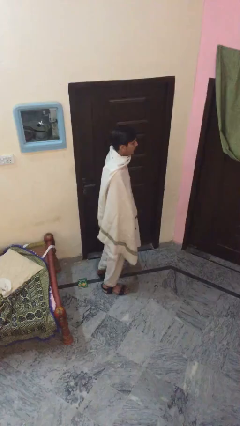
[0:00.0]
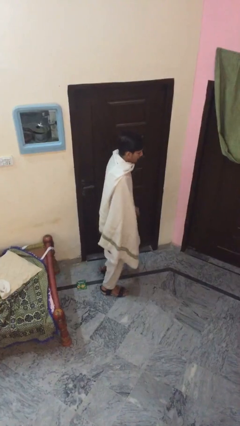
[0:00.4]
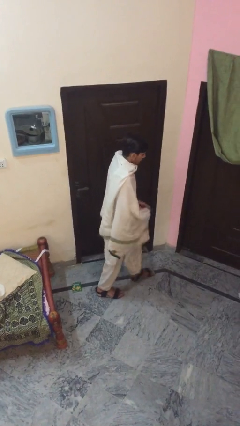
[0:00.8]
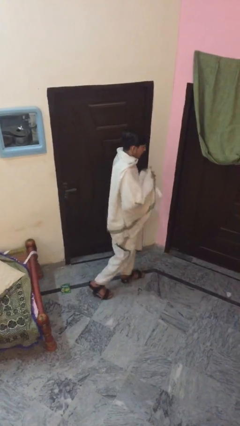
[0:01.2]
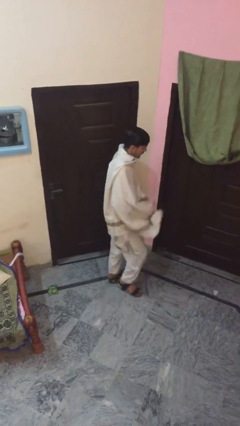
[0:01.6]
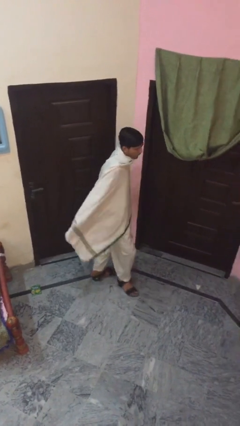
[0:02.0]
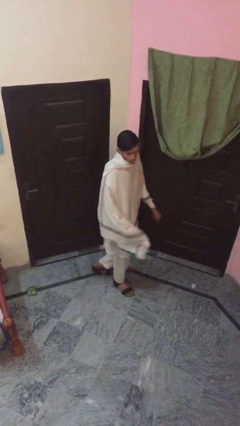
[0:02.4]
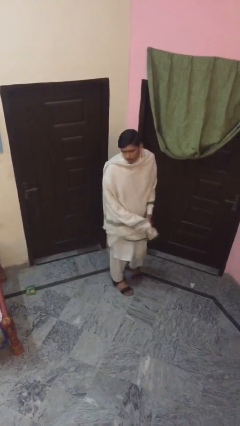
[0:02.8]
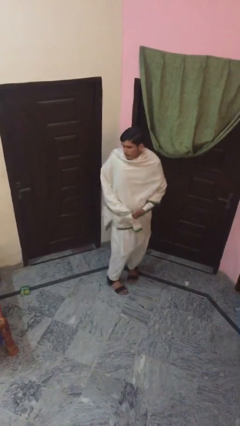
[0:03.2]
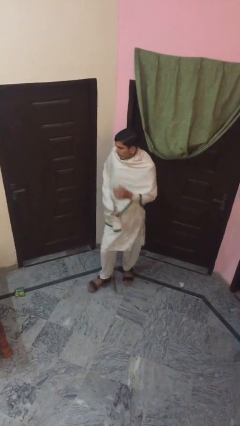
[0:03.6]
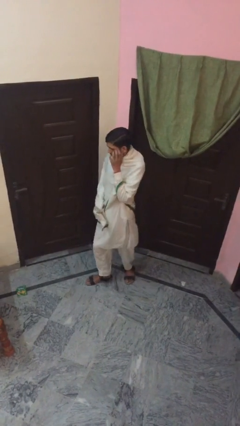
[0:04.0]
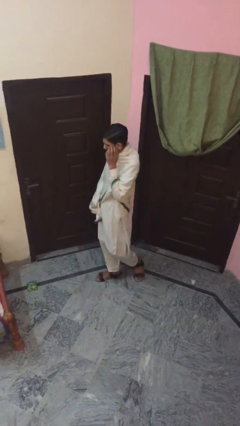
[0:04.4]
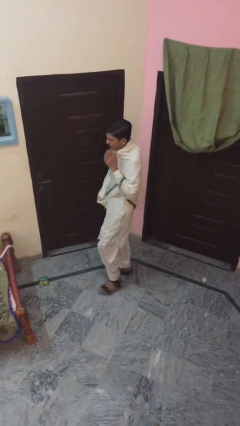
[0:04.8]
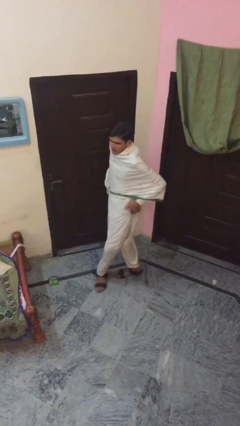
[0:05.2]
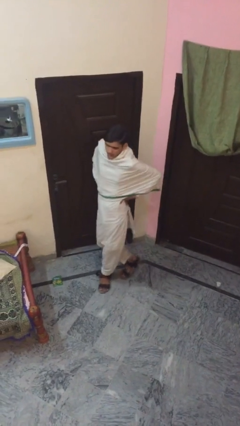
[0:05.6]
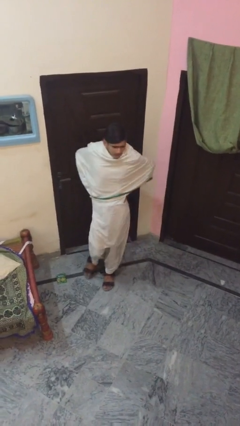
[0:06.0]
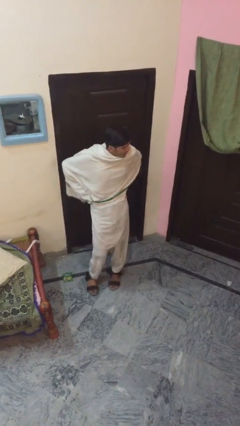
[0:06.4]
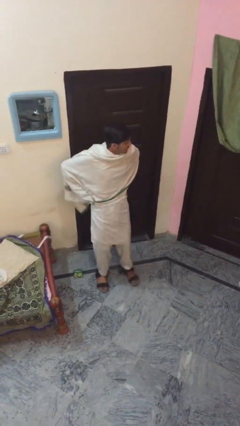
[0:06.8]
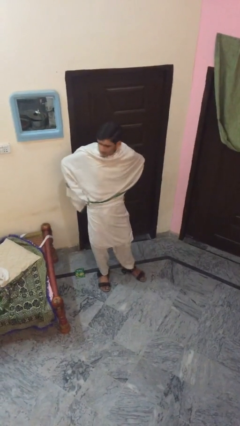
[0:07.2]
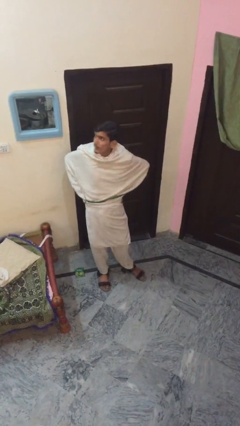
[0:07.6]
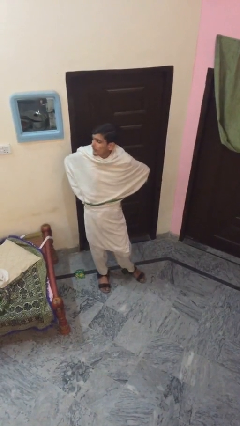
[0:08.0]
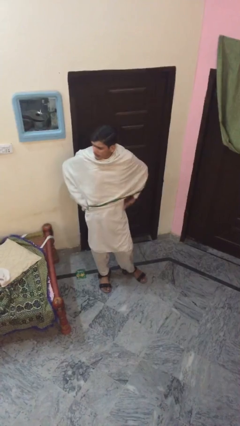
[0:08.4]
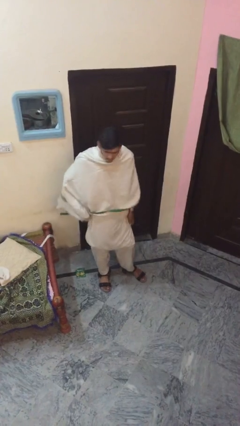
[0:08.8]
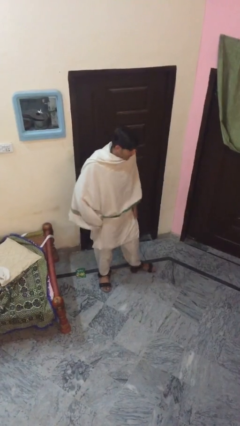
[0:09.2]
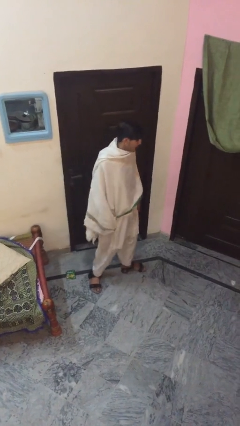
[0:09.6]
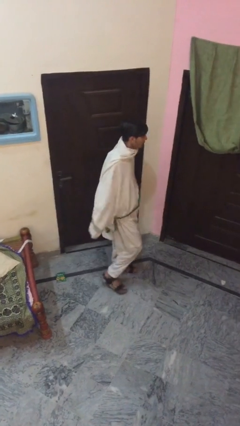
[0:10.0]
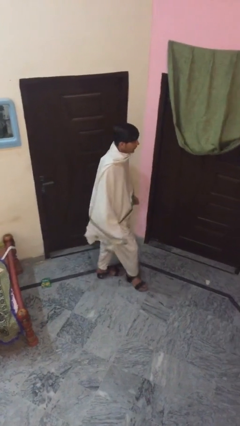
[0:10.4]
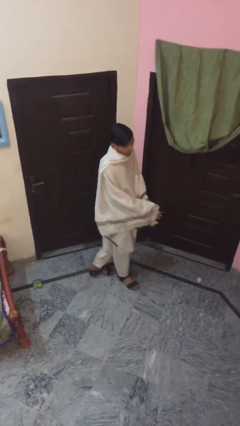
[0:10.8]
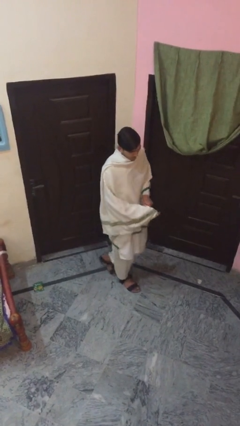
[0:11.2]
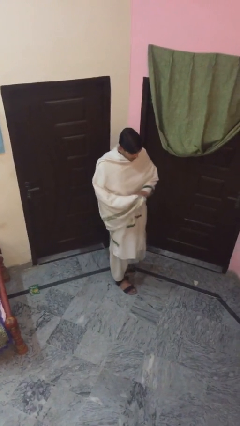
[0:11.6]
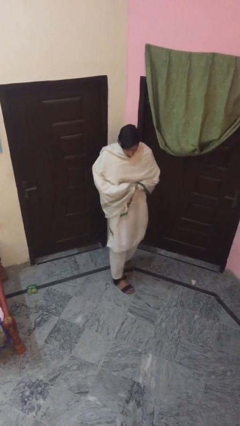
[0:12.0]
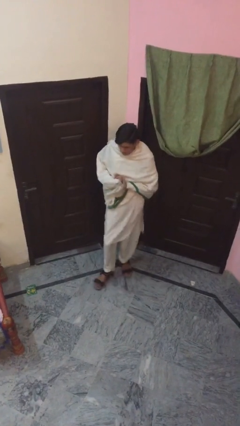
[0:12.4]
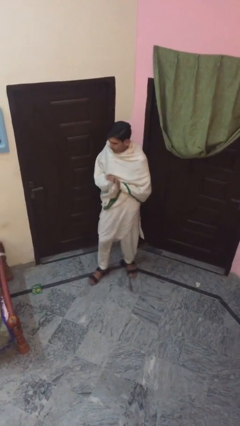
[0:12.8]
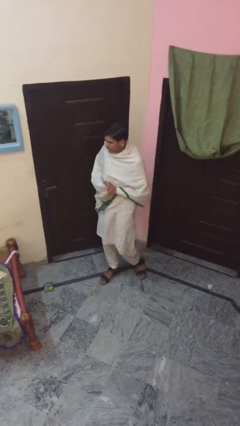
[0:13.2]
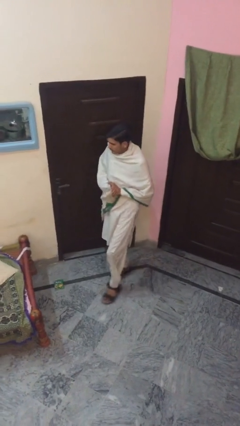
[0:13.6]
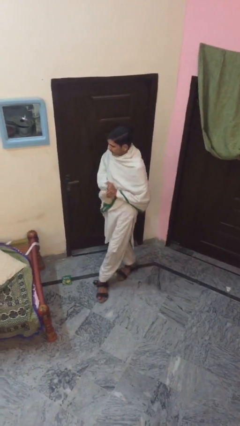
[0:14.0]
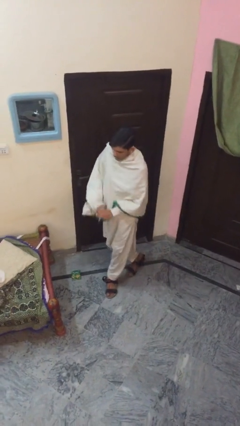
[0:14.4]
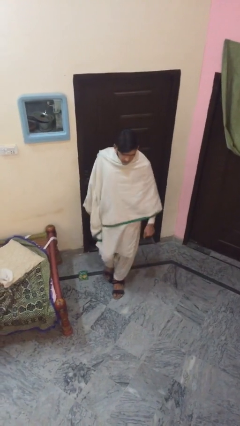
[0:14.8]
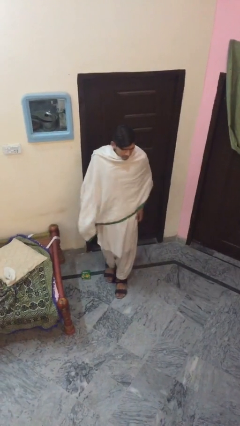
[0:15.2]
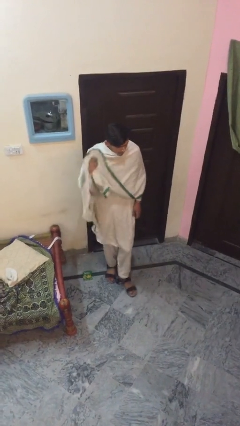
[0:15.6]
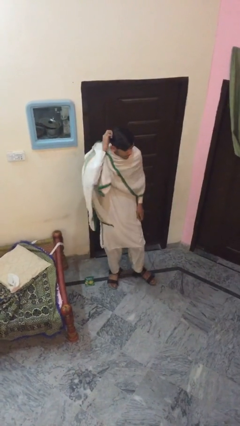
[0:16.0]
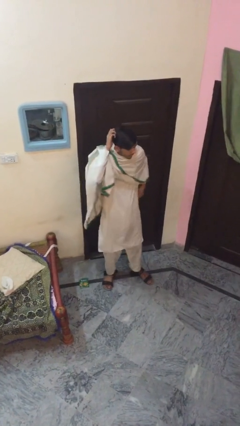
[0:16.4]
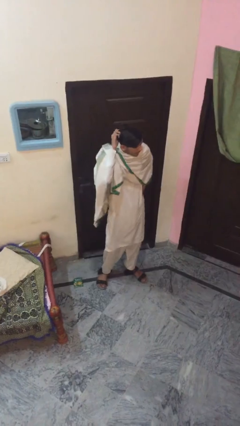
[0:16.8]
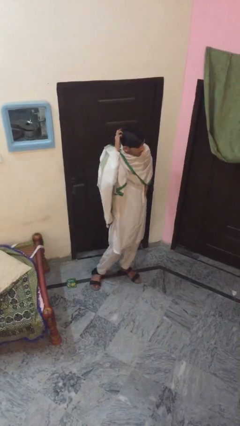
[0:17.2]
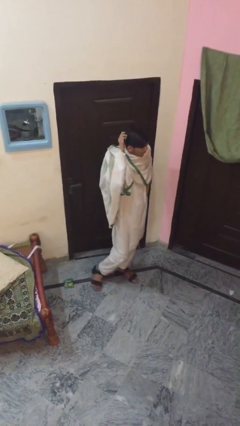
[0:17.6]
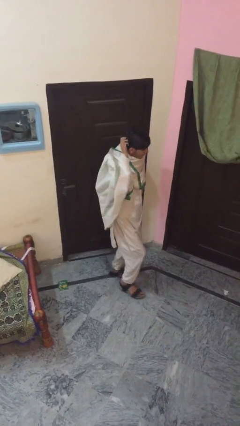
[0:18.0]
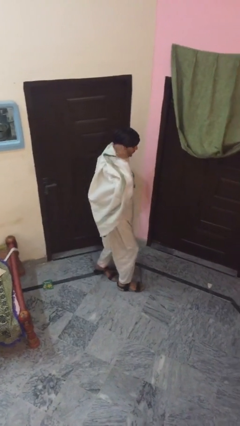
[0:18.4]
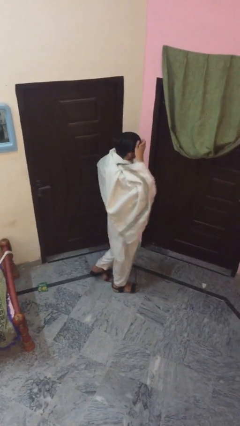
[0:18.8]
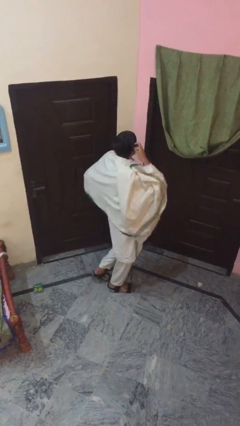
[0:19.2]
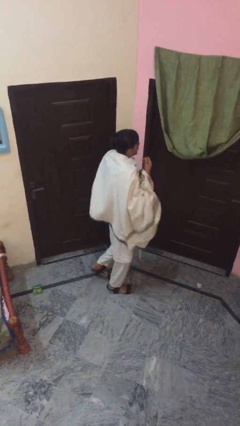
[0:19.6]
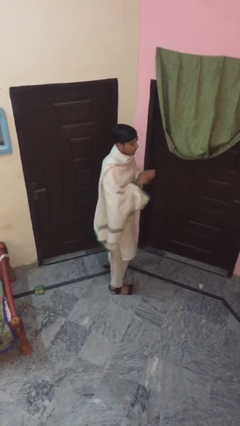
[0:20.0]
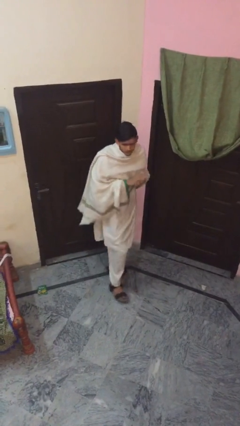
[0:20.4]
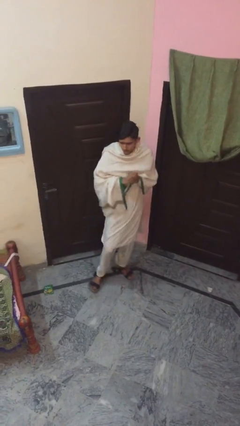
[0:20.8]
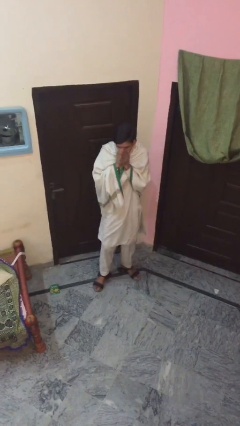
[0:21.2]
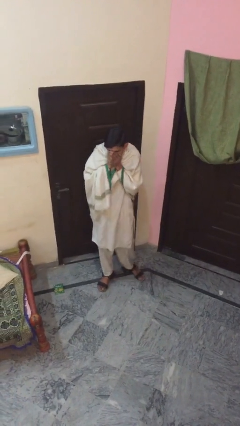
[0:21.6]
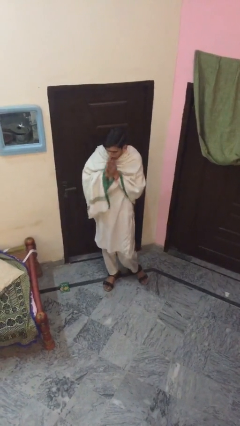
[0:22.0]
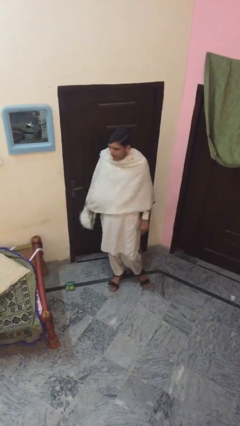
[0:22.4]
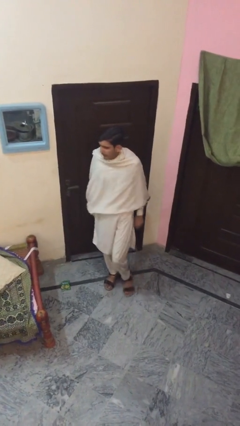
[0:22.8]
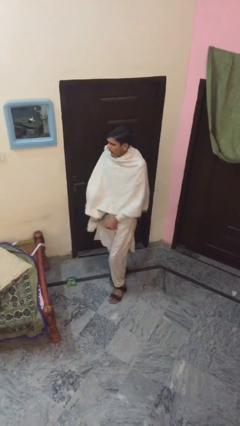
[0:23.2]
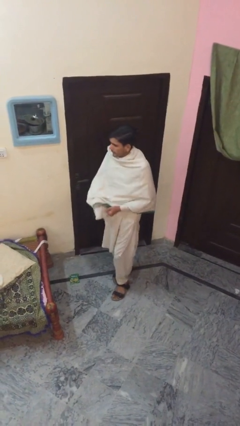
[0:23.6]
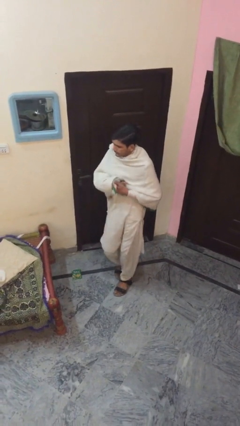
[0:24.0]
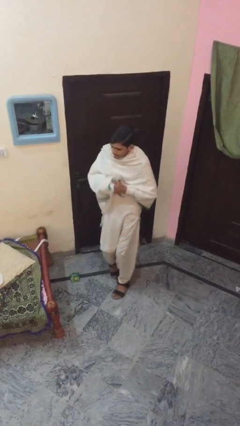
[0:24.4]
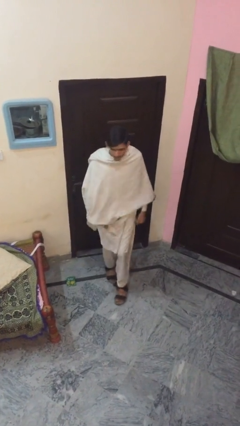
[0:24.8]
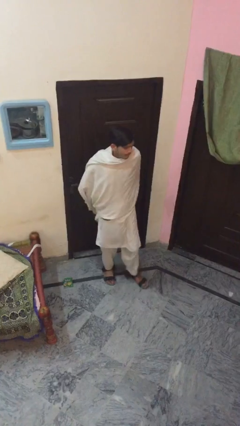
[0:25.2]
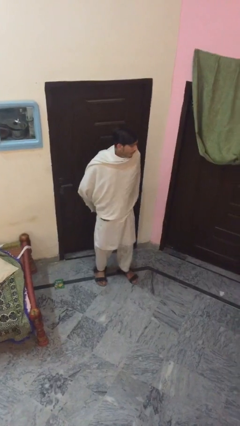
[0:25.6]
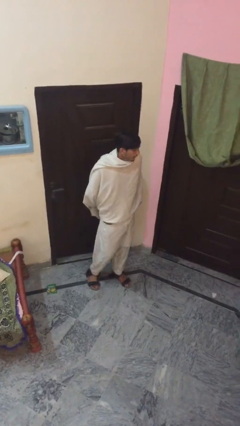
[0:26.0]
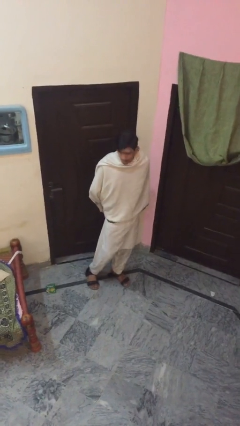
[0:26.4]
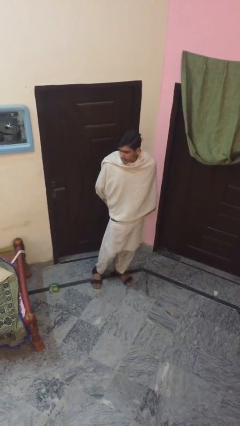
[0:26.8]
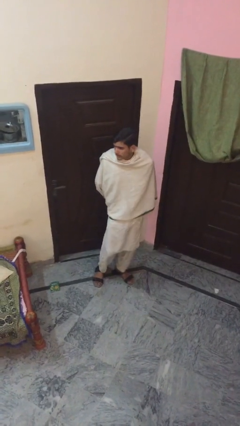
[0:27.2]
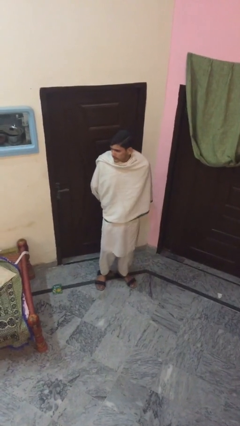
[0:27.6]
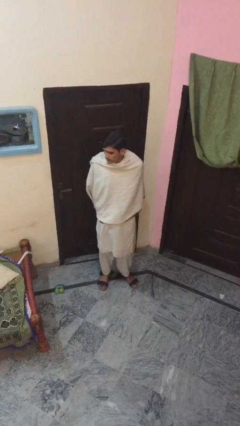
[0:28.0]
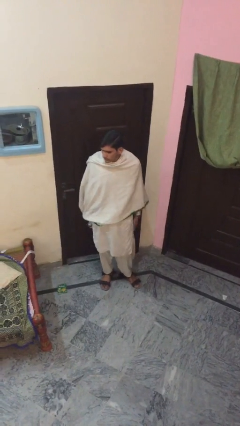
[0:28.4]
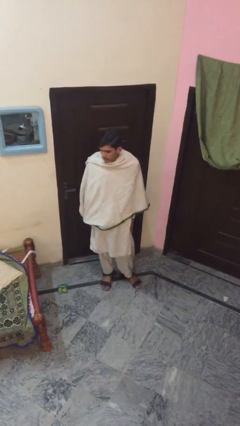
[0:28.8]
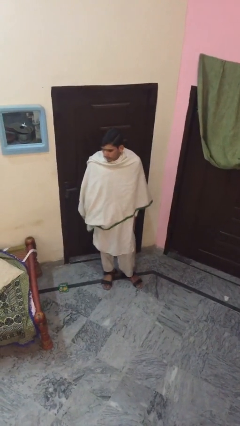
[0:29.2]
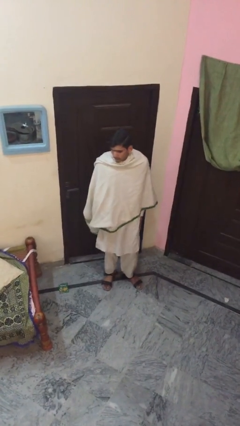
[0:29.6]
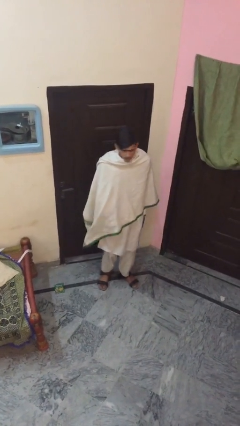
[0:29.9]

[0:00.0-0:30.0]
person walks

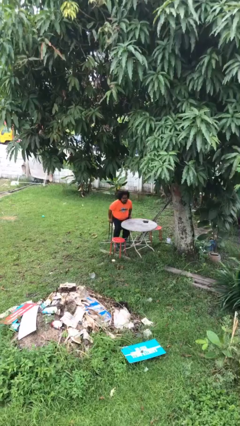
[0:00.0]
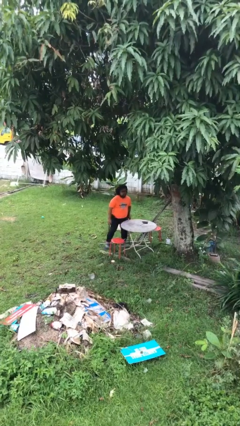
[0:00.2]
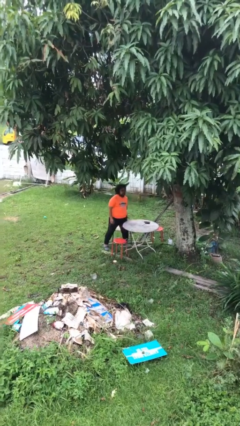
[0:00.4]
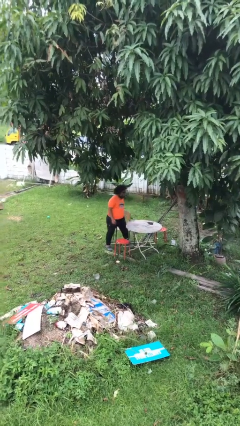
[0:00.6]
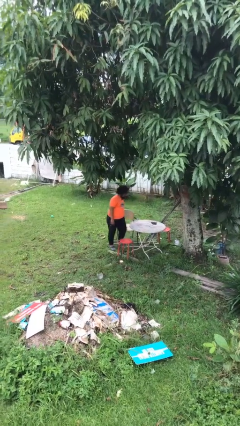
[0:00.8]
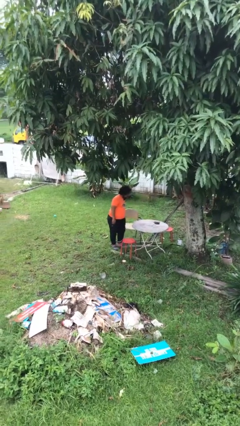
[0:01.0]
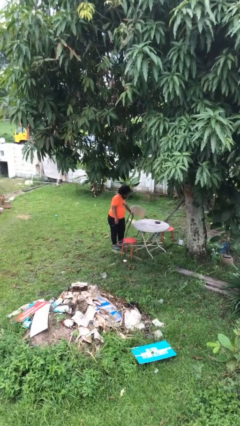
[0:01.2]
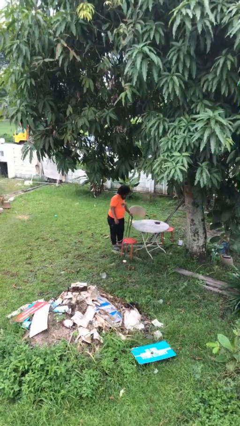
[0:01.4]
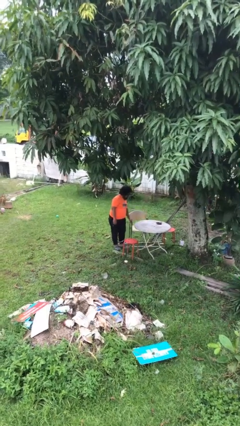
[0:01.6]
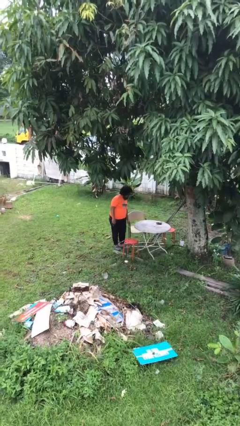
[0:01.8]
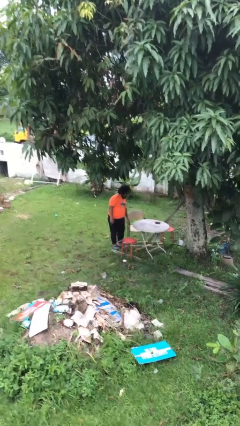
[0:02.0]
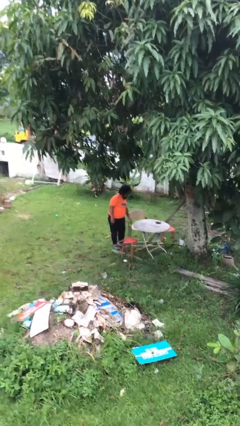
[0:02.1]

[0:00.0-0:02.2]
person stands up

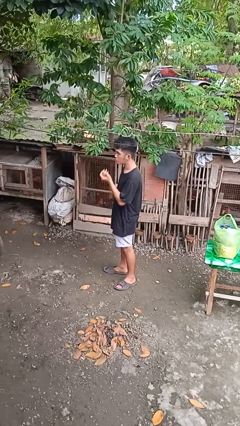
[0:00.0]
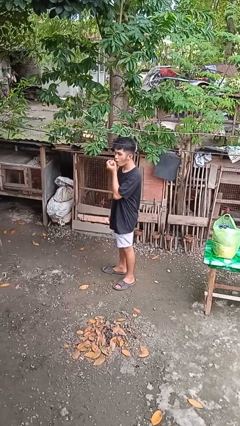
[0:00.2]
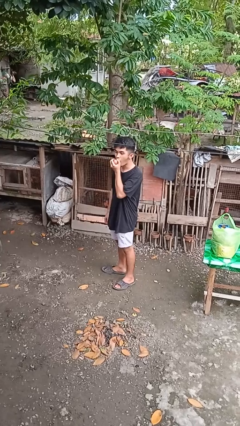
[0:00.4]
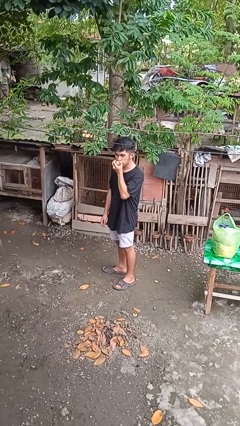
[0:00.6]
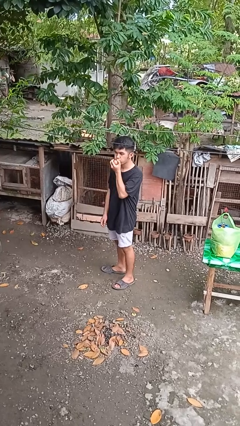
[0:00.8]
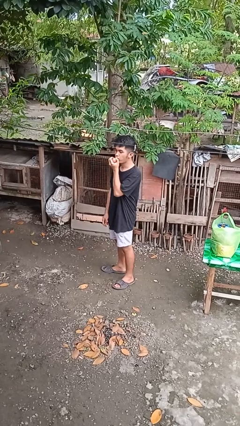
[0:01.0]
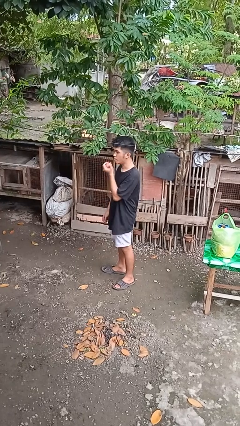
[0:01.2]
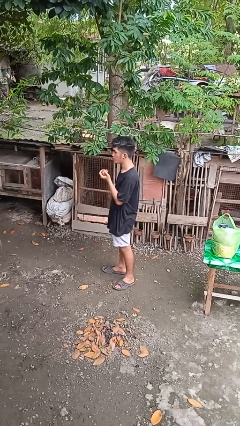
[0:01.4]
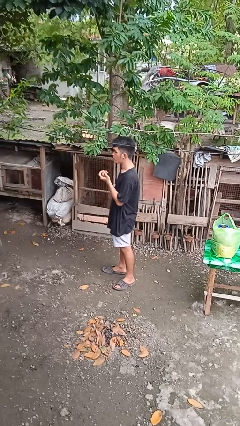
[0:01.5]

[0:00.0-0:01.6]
person eats apple
